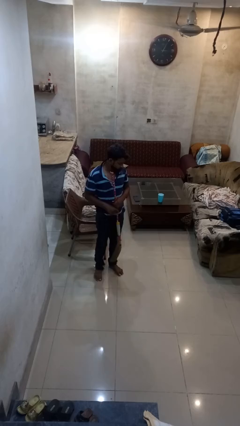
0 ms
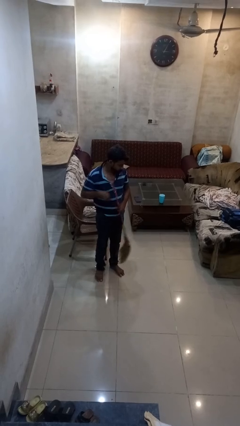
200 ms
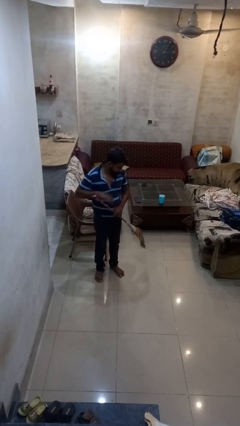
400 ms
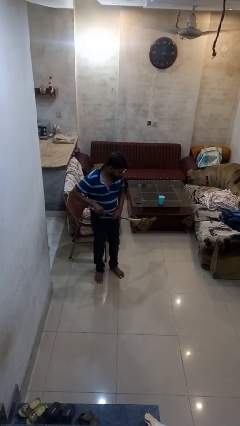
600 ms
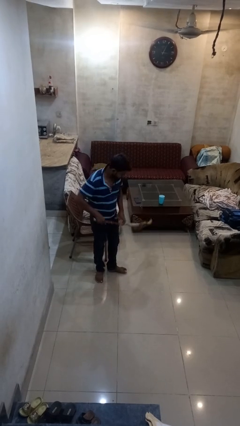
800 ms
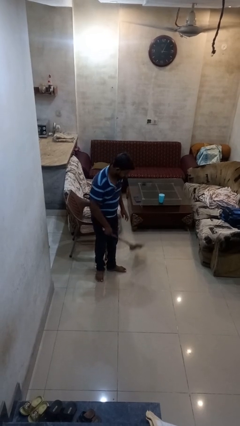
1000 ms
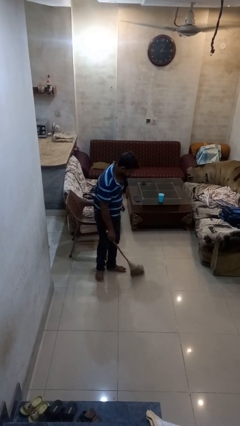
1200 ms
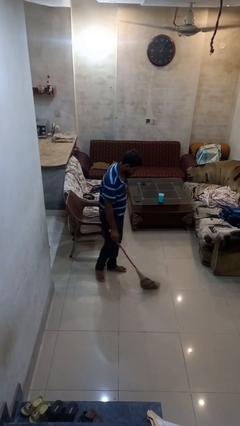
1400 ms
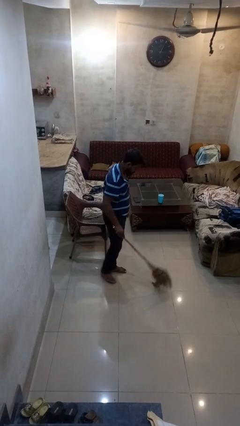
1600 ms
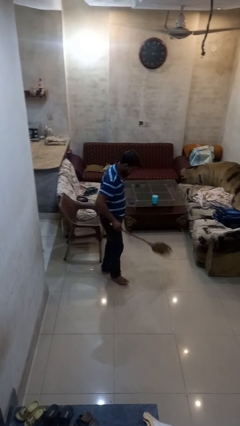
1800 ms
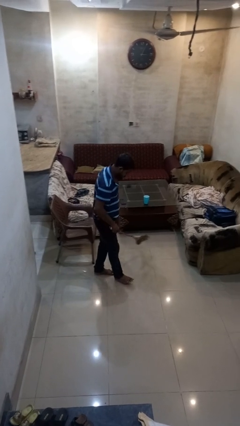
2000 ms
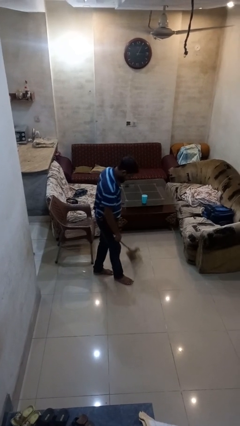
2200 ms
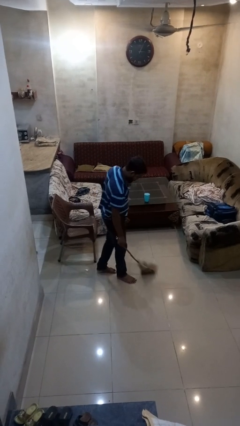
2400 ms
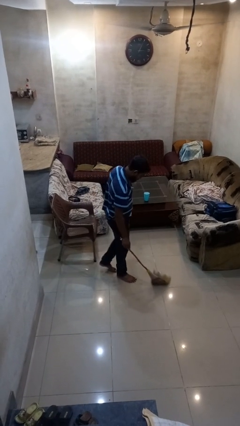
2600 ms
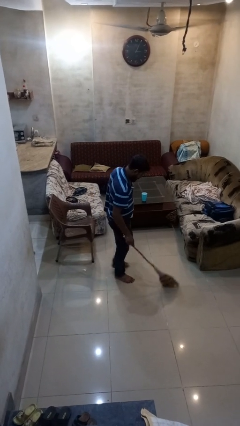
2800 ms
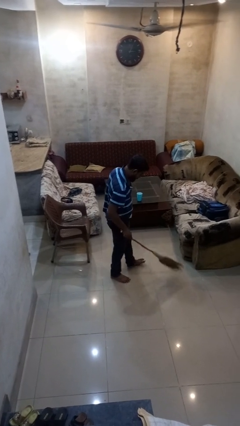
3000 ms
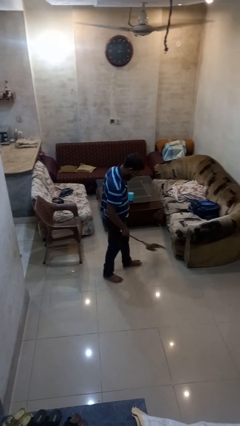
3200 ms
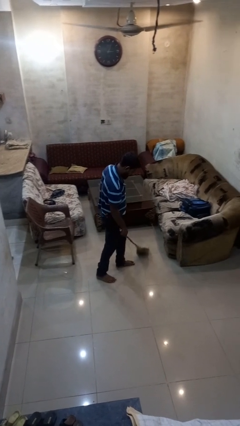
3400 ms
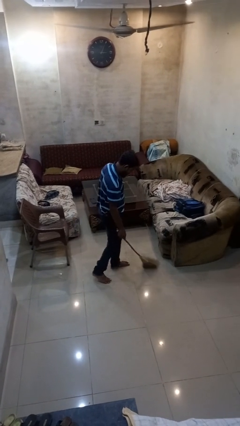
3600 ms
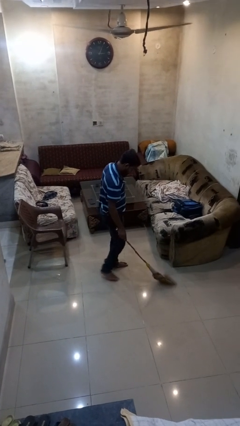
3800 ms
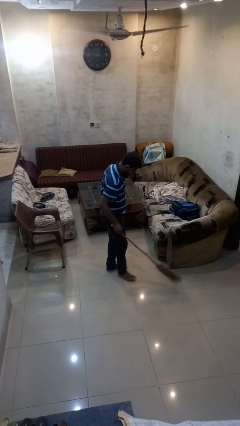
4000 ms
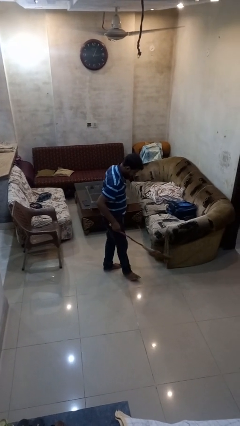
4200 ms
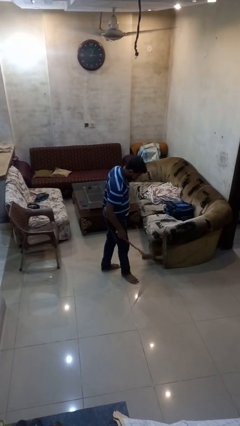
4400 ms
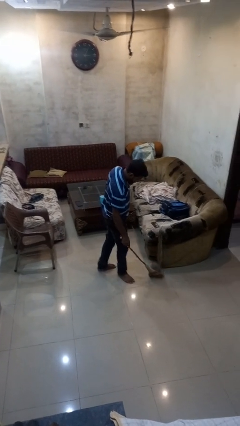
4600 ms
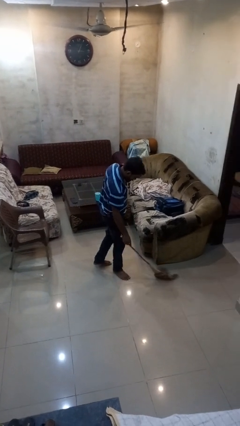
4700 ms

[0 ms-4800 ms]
person sweeps floor

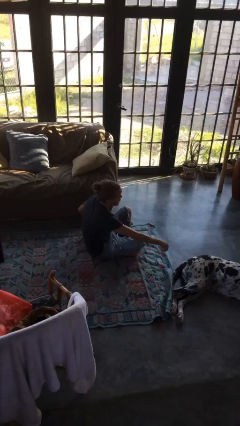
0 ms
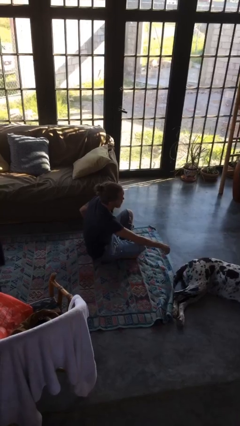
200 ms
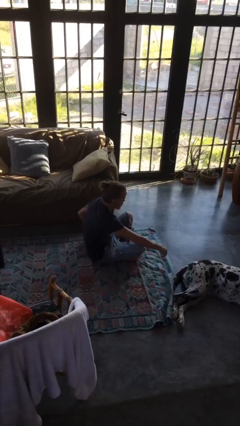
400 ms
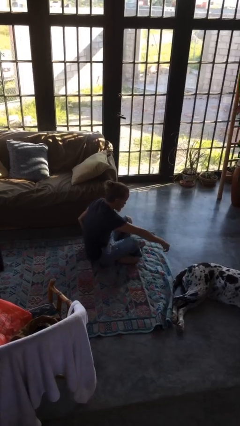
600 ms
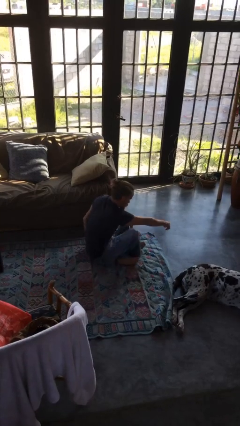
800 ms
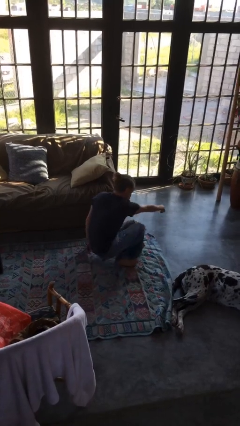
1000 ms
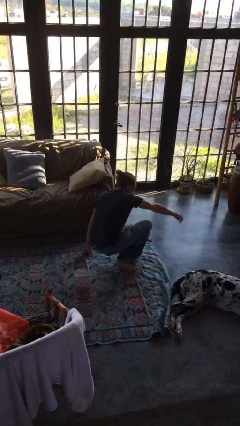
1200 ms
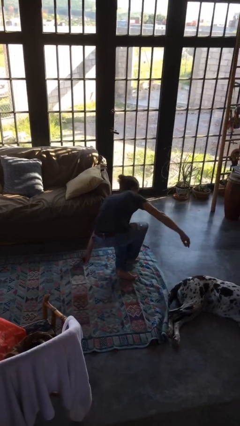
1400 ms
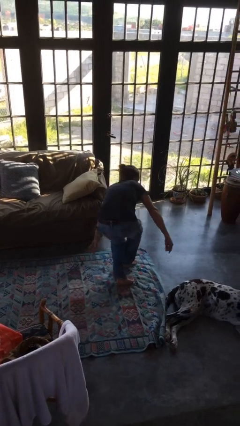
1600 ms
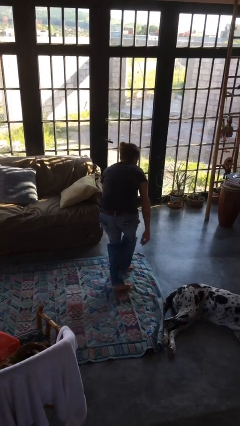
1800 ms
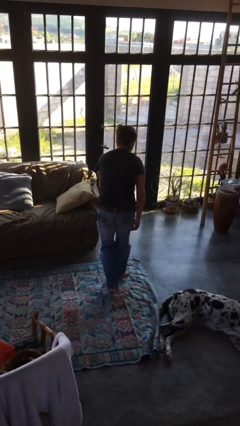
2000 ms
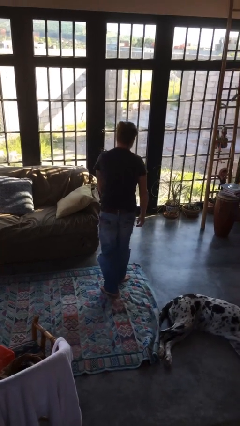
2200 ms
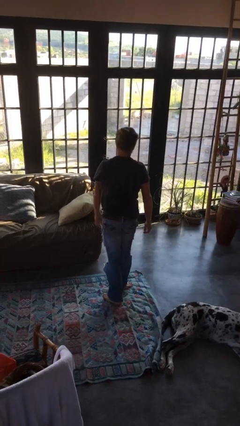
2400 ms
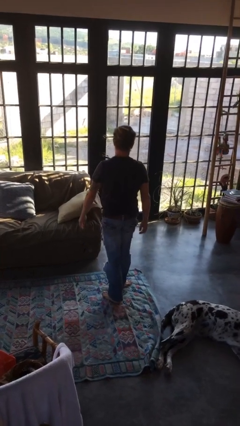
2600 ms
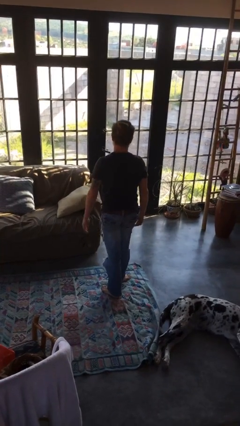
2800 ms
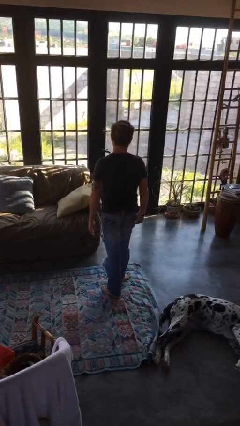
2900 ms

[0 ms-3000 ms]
person stands up from floor

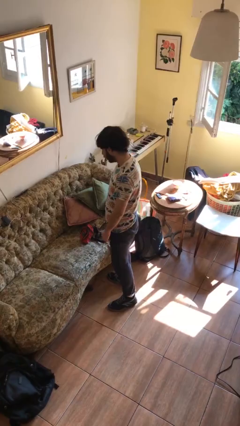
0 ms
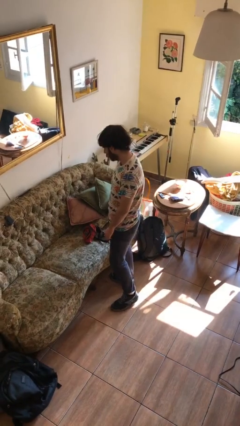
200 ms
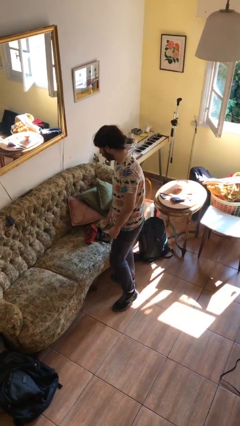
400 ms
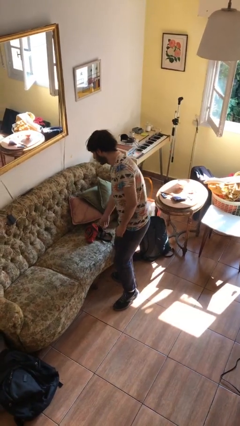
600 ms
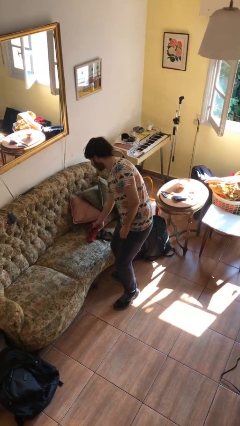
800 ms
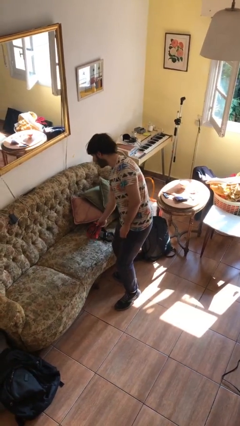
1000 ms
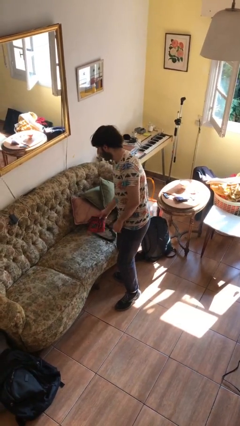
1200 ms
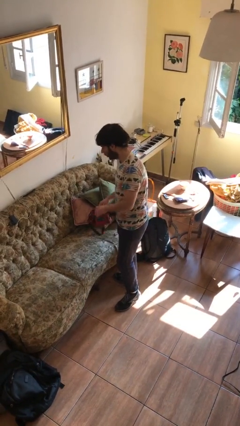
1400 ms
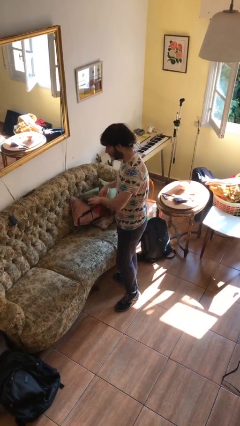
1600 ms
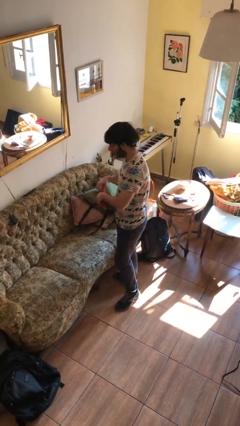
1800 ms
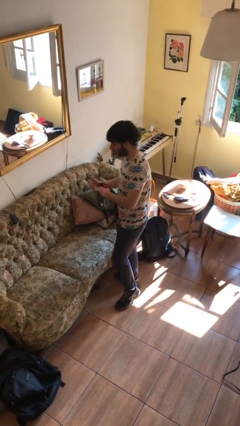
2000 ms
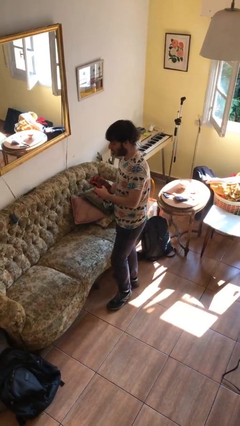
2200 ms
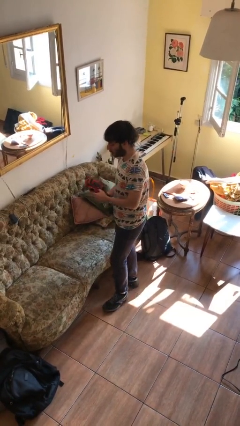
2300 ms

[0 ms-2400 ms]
person picks up object from couch

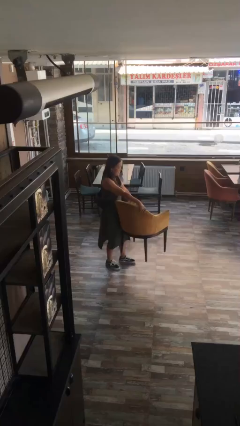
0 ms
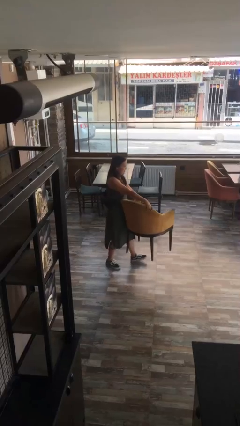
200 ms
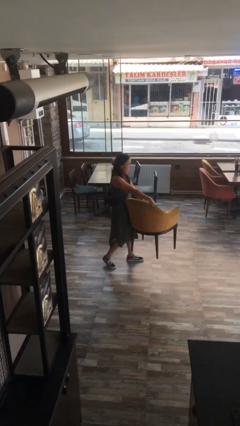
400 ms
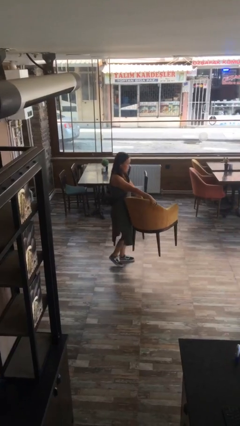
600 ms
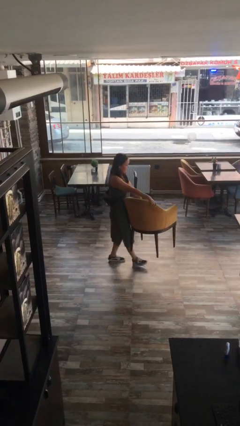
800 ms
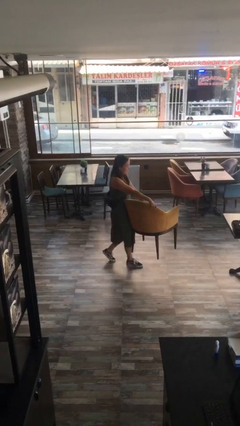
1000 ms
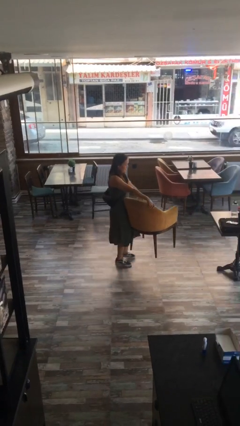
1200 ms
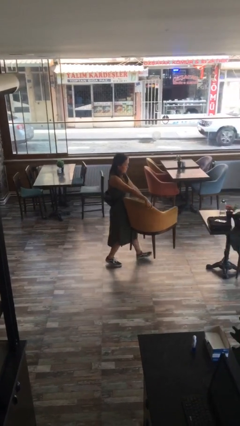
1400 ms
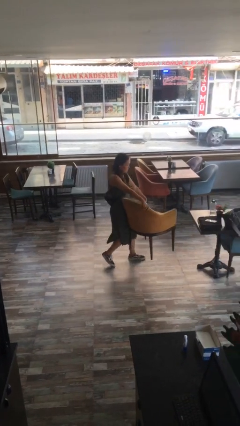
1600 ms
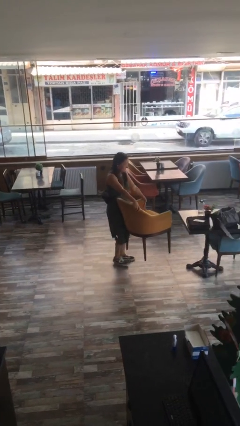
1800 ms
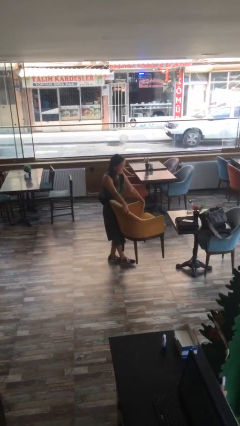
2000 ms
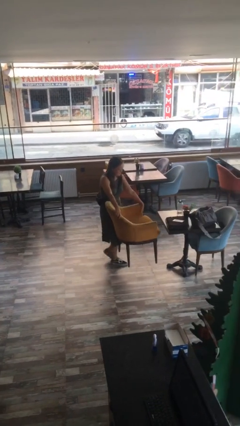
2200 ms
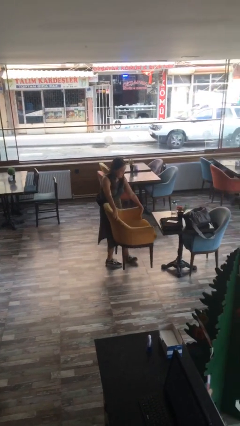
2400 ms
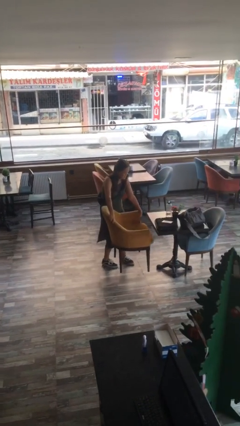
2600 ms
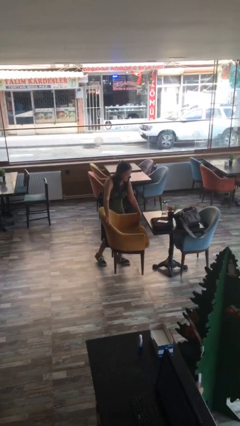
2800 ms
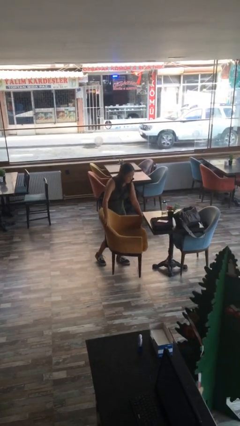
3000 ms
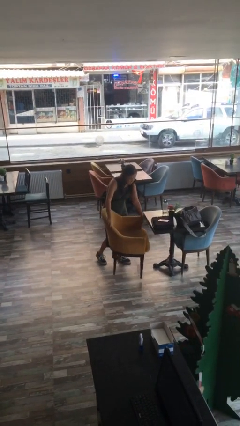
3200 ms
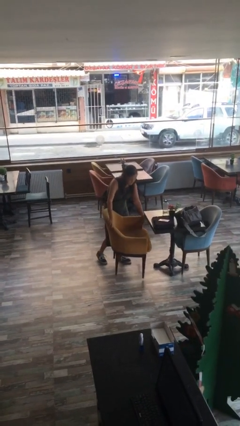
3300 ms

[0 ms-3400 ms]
person carries heavy object

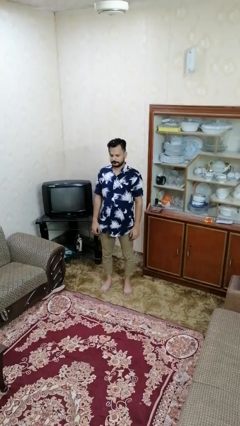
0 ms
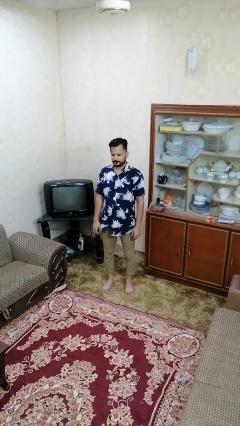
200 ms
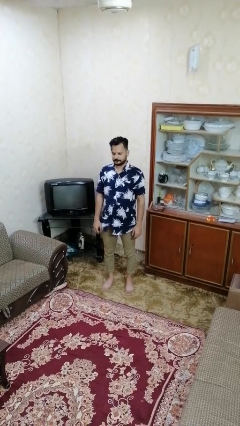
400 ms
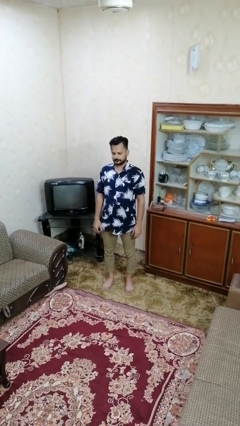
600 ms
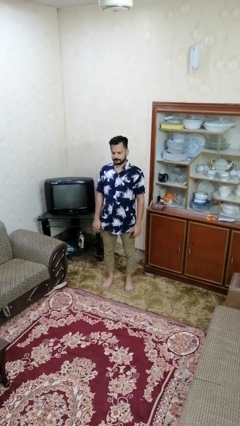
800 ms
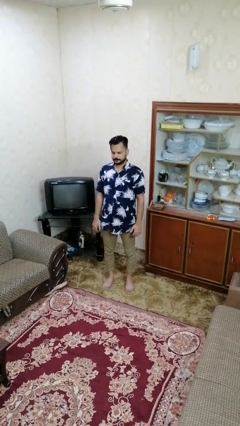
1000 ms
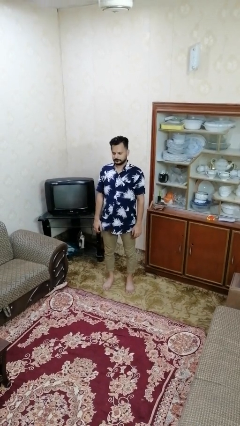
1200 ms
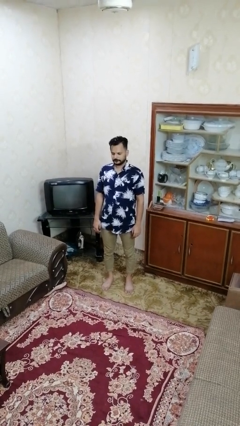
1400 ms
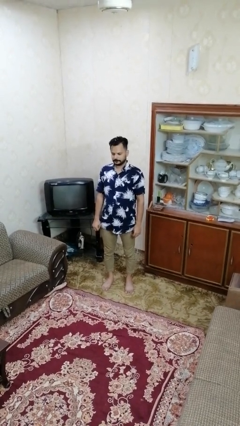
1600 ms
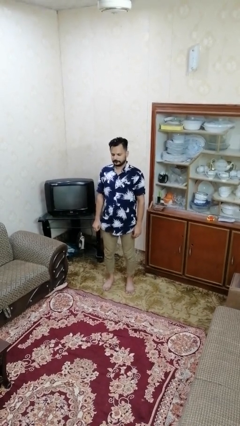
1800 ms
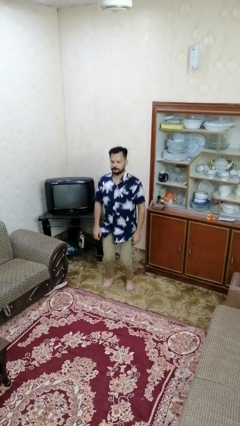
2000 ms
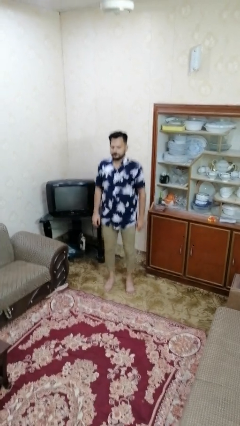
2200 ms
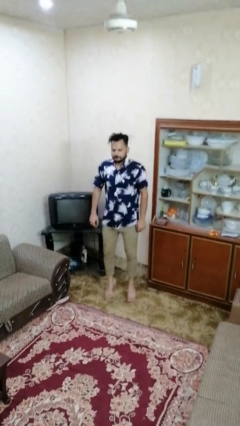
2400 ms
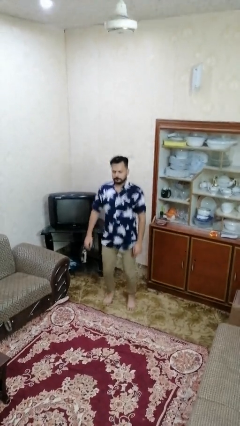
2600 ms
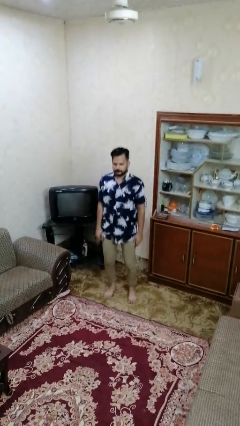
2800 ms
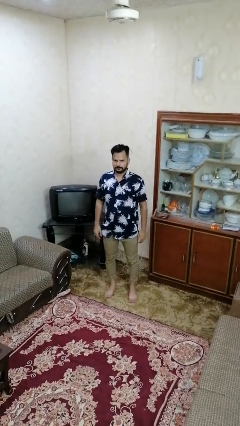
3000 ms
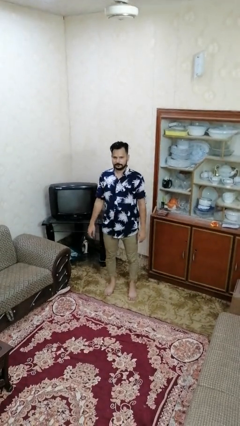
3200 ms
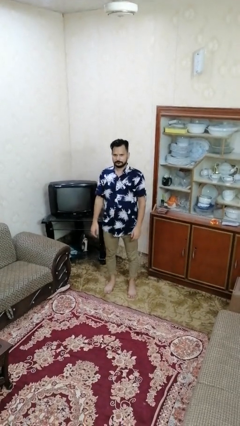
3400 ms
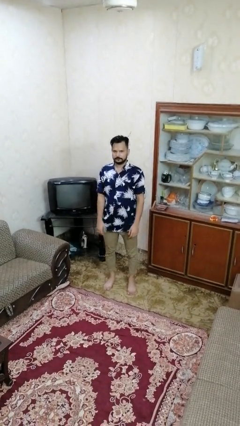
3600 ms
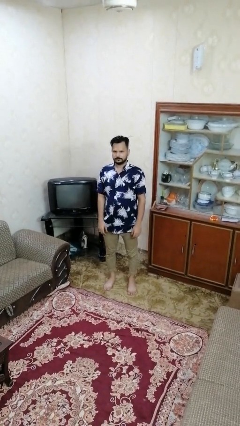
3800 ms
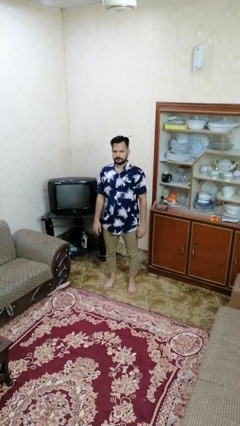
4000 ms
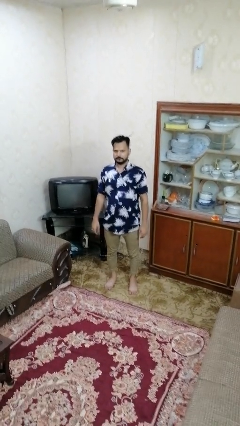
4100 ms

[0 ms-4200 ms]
person jumps
